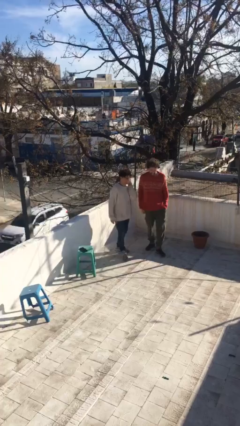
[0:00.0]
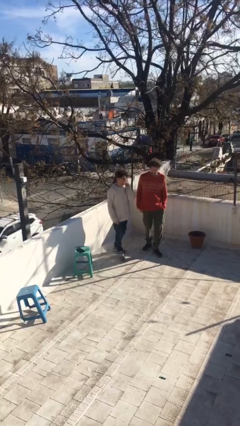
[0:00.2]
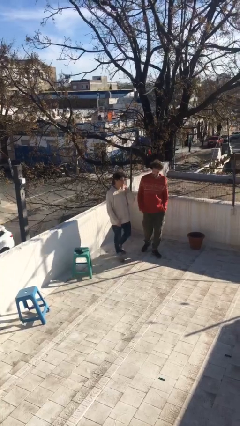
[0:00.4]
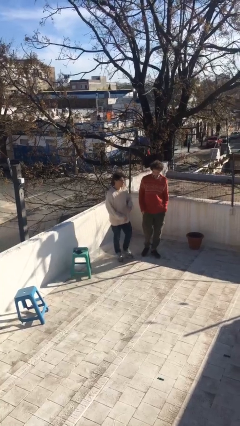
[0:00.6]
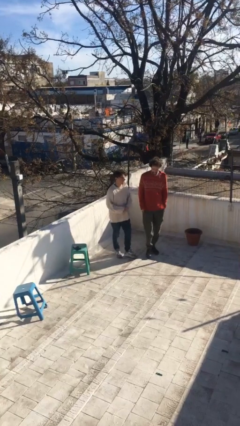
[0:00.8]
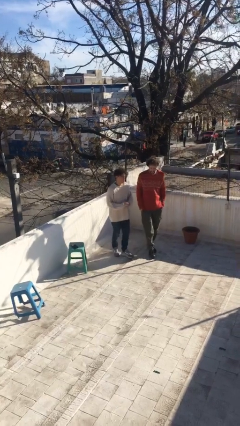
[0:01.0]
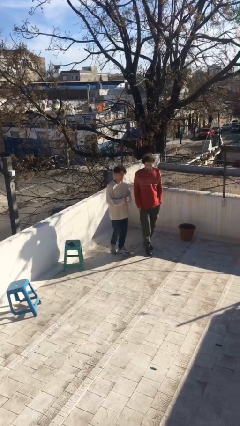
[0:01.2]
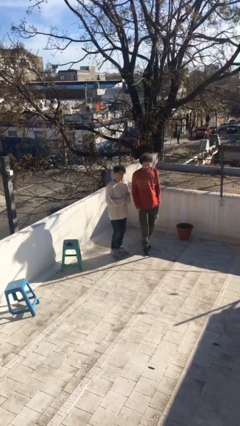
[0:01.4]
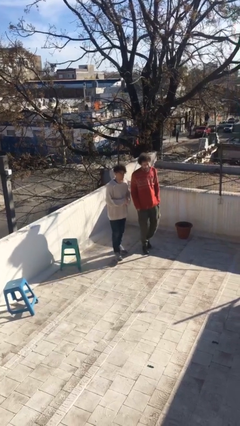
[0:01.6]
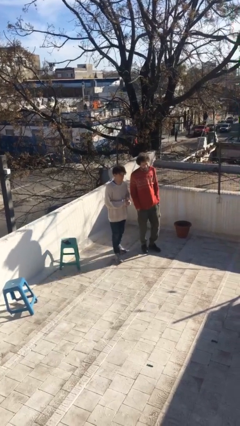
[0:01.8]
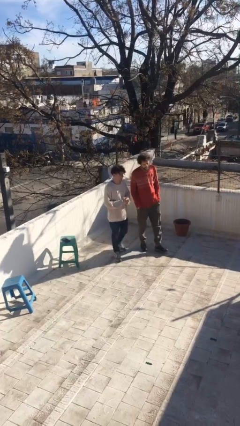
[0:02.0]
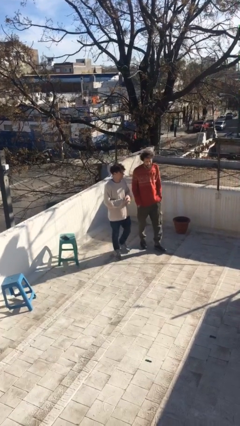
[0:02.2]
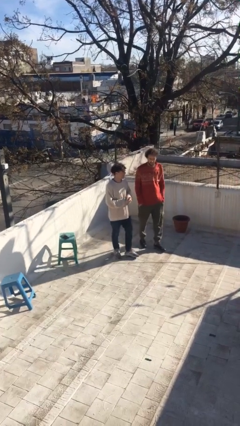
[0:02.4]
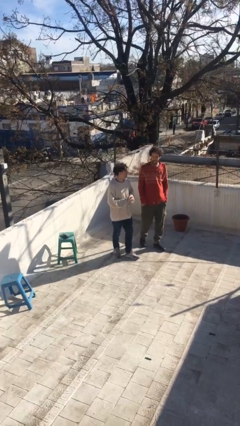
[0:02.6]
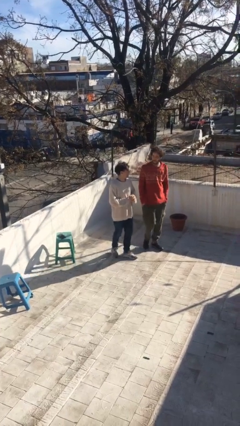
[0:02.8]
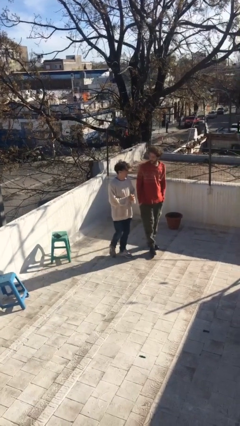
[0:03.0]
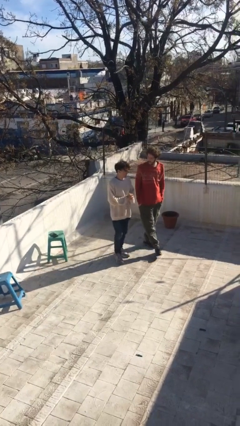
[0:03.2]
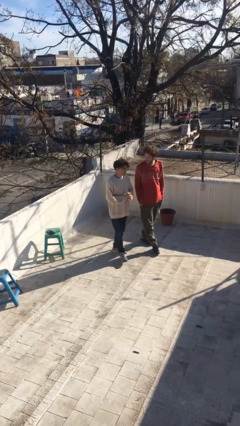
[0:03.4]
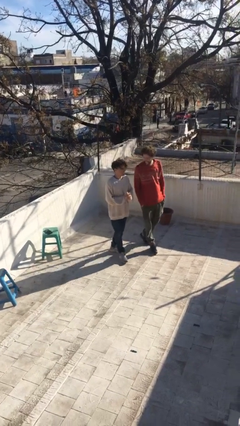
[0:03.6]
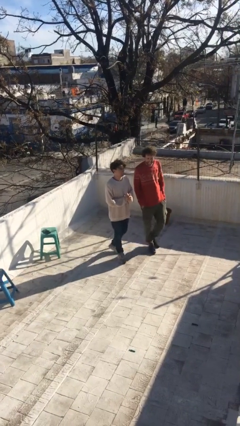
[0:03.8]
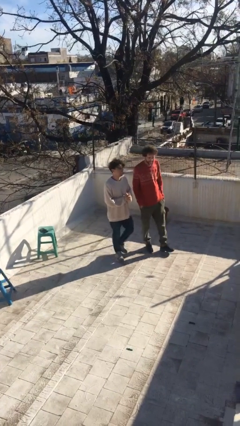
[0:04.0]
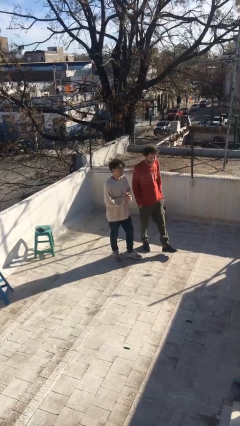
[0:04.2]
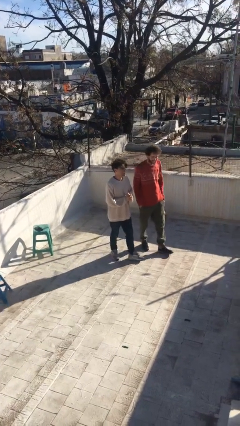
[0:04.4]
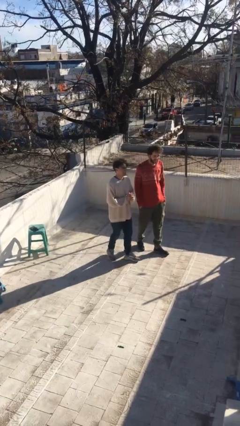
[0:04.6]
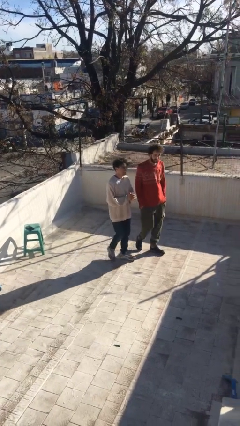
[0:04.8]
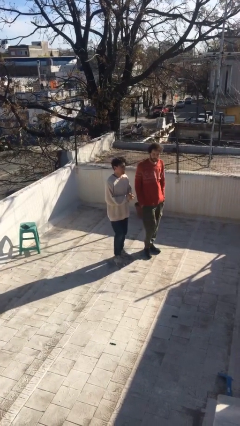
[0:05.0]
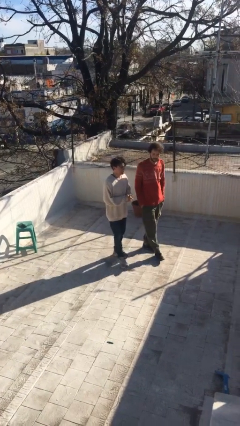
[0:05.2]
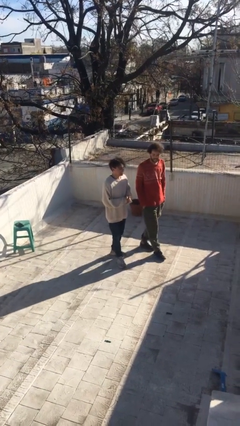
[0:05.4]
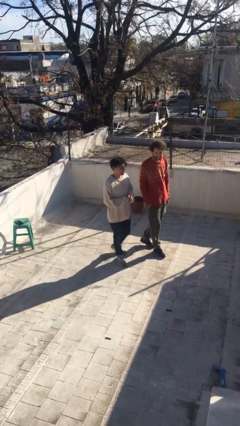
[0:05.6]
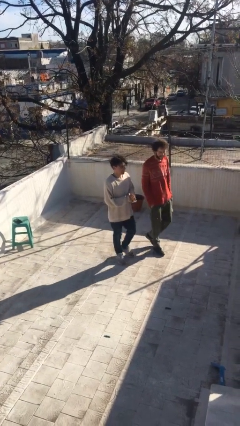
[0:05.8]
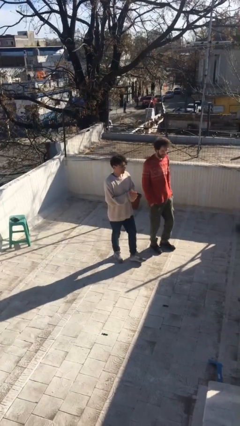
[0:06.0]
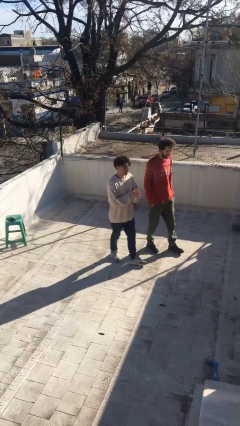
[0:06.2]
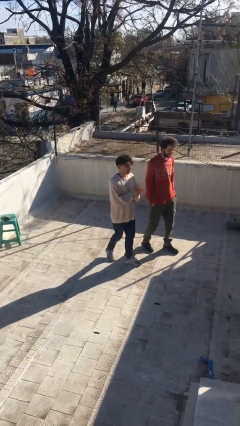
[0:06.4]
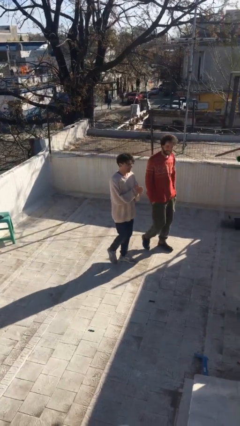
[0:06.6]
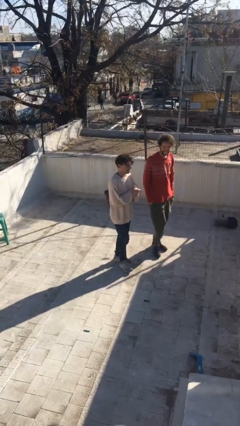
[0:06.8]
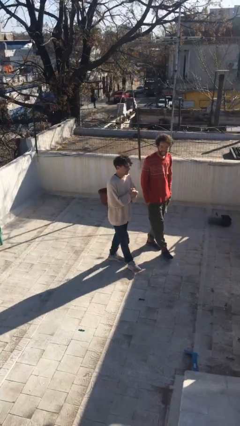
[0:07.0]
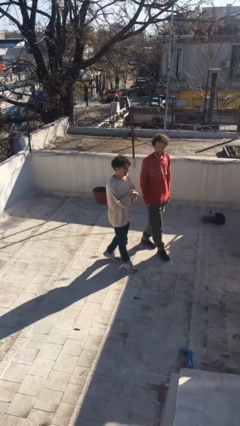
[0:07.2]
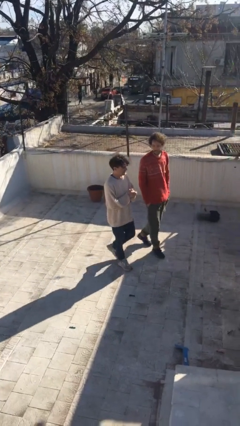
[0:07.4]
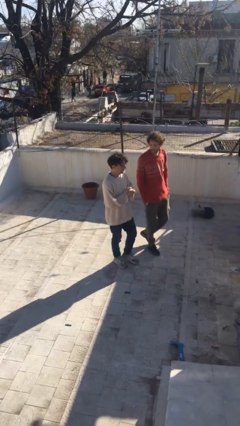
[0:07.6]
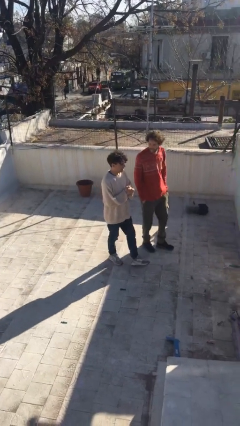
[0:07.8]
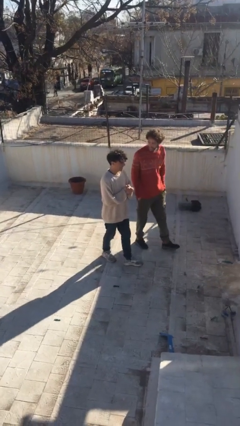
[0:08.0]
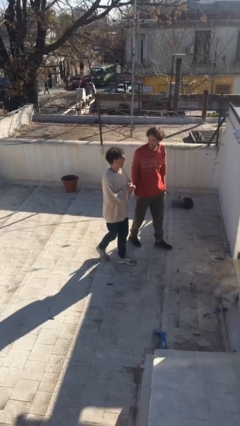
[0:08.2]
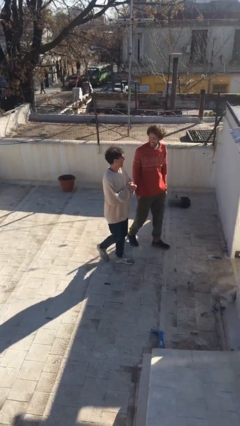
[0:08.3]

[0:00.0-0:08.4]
person talks to person

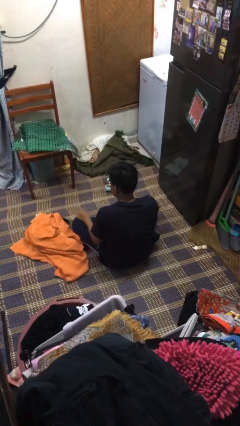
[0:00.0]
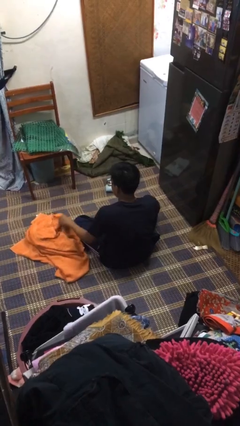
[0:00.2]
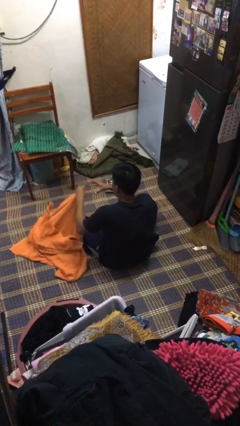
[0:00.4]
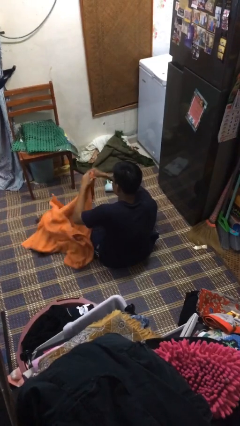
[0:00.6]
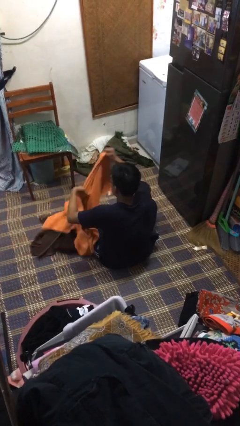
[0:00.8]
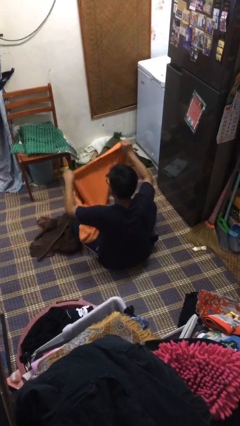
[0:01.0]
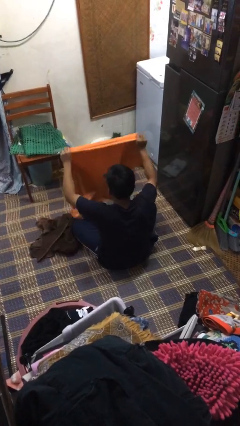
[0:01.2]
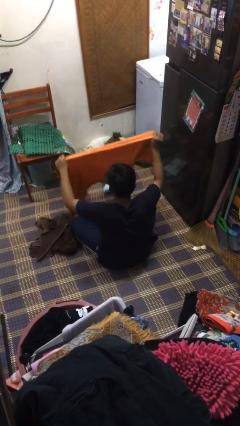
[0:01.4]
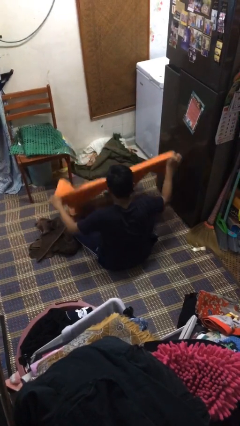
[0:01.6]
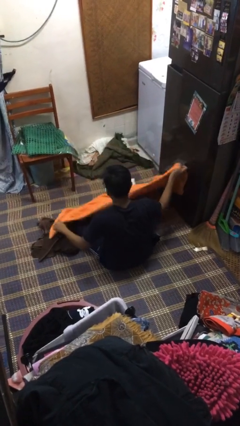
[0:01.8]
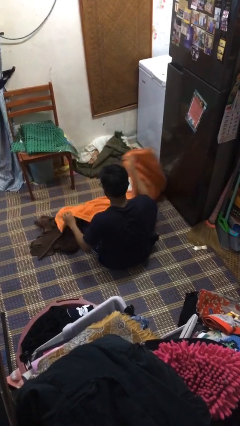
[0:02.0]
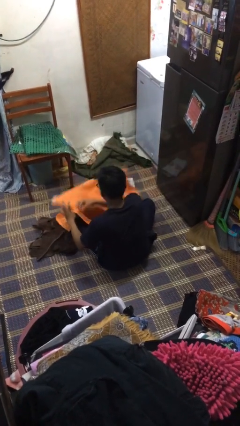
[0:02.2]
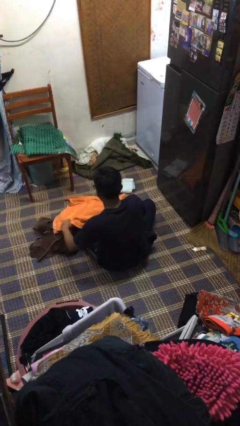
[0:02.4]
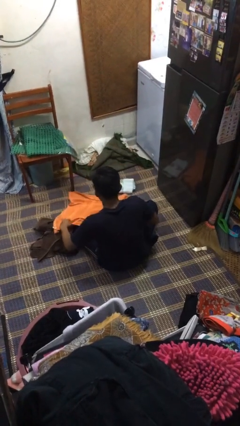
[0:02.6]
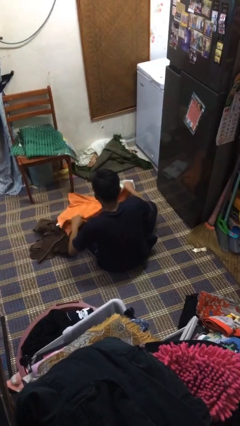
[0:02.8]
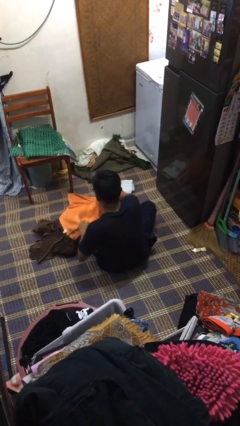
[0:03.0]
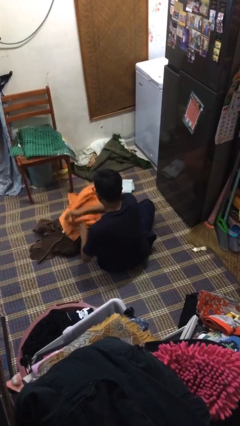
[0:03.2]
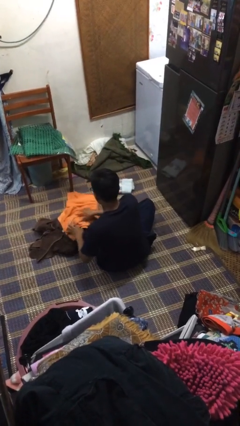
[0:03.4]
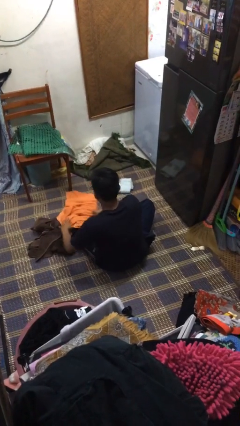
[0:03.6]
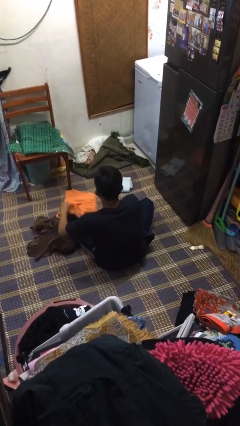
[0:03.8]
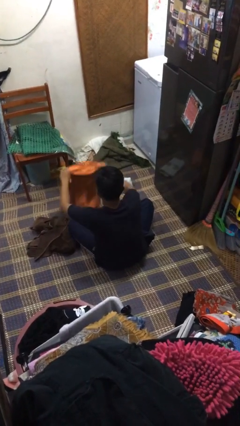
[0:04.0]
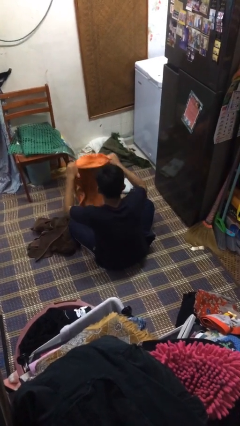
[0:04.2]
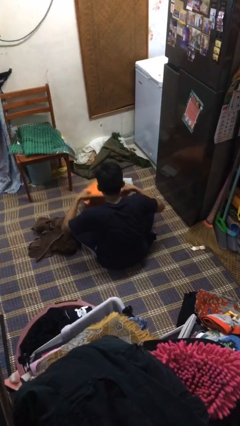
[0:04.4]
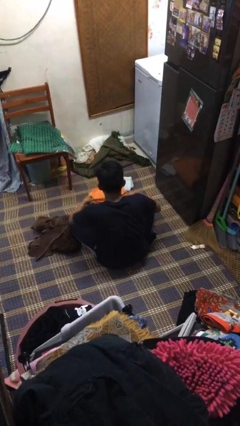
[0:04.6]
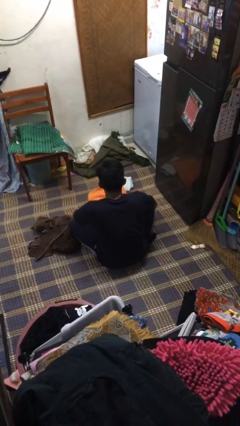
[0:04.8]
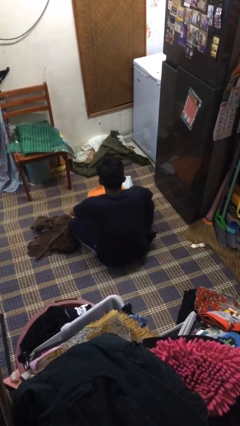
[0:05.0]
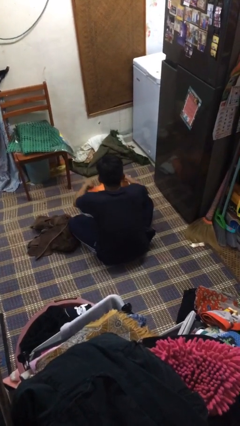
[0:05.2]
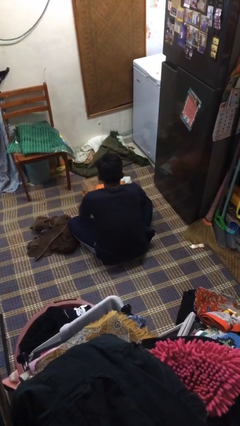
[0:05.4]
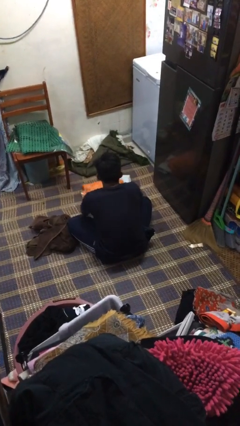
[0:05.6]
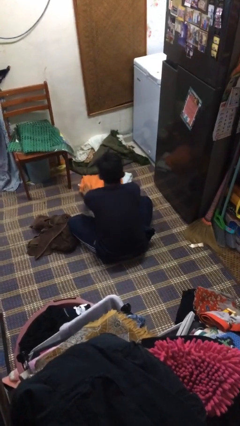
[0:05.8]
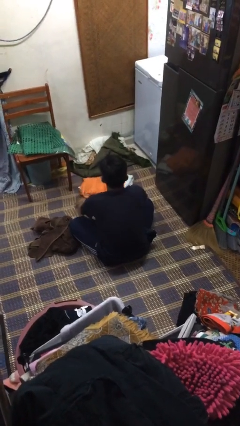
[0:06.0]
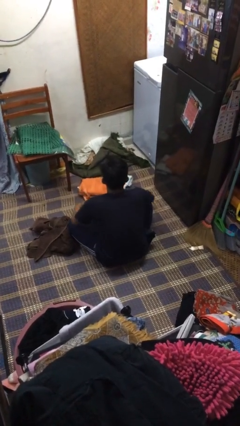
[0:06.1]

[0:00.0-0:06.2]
person folds towel

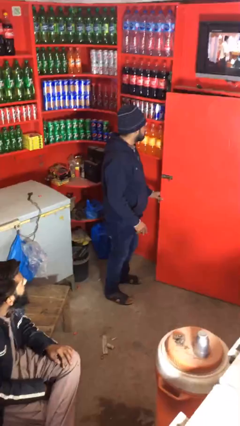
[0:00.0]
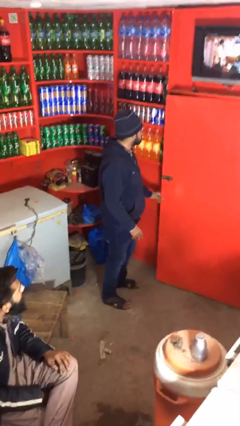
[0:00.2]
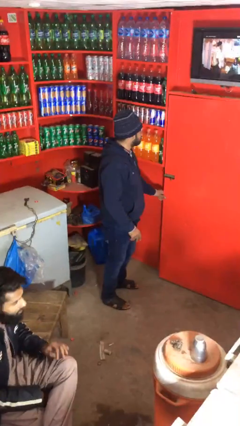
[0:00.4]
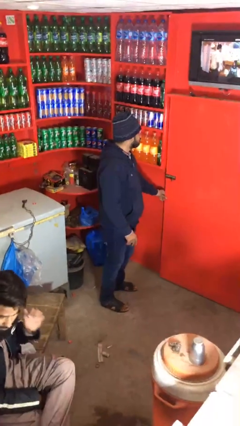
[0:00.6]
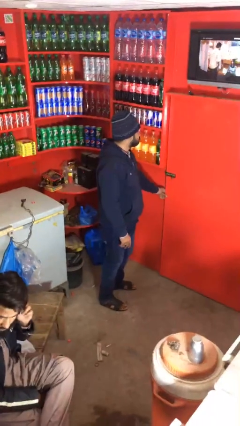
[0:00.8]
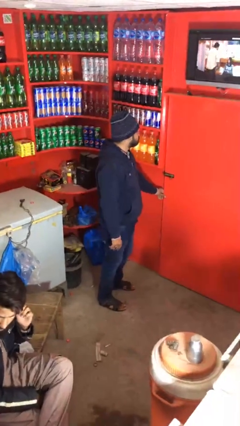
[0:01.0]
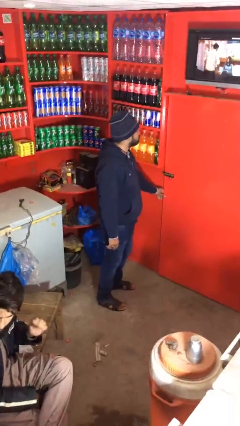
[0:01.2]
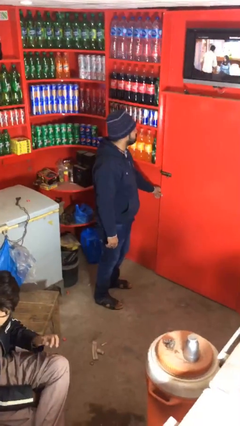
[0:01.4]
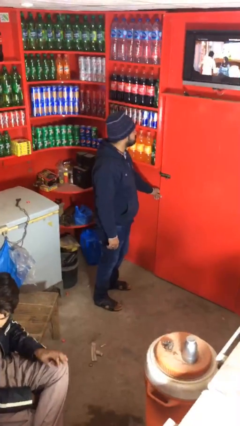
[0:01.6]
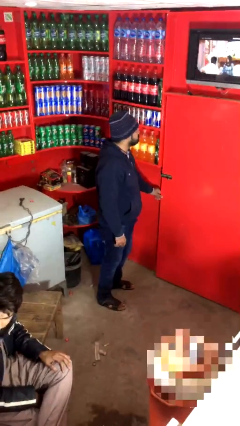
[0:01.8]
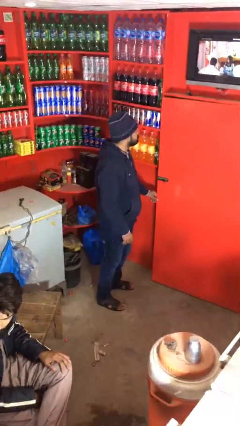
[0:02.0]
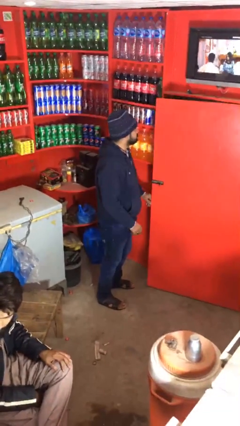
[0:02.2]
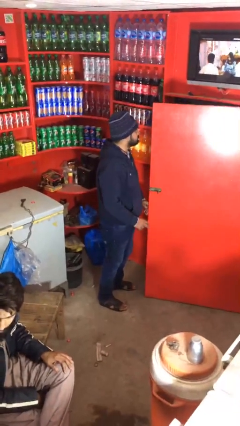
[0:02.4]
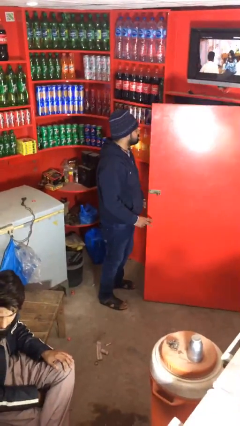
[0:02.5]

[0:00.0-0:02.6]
person opens facility door

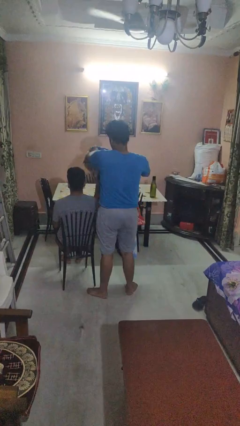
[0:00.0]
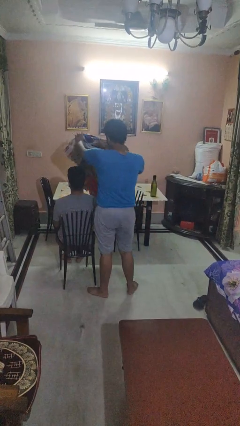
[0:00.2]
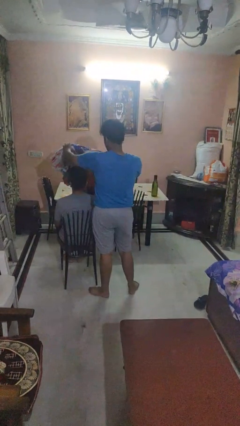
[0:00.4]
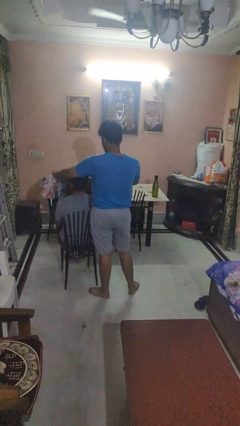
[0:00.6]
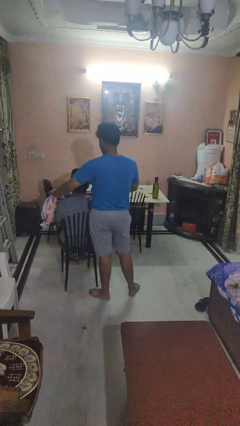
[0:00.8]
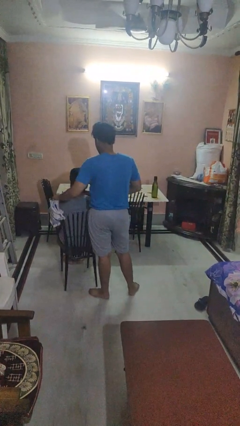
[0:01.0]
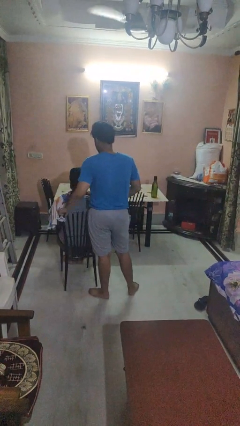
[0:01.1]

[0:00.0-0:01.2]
person covers friend with blanket
